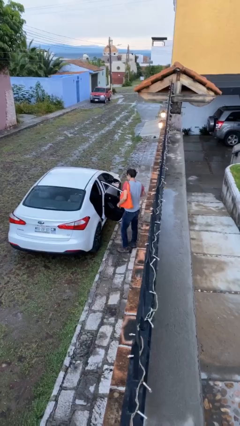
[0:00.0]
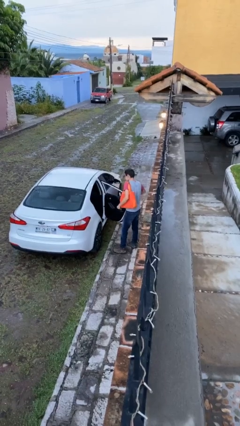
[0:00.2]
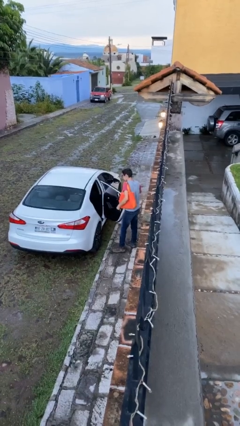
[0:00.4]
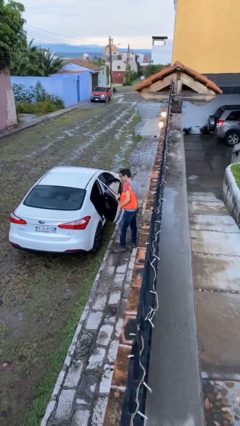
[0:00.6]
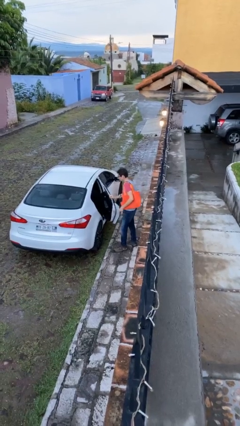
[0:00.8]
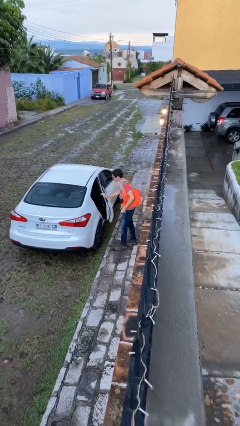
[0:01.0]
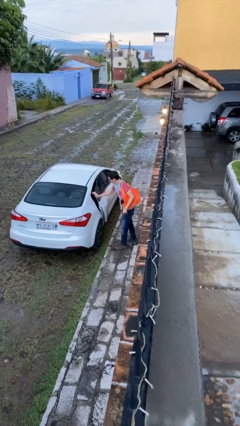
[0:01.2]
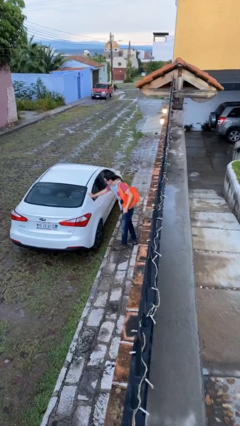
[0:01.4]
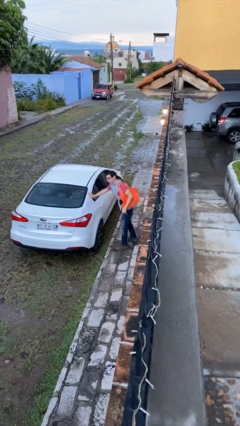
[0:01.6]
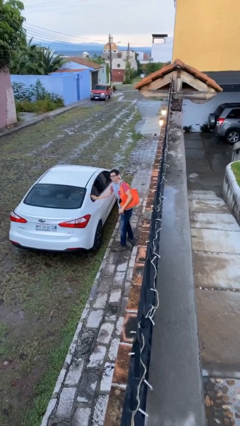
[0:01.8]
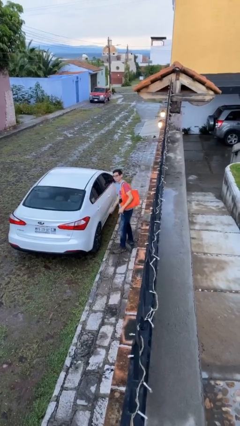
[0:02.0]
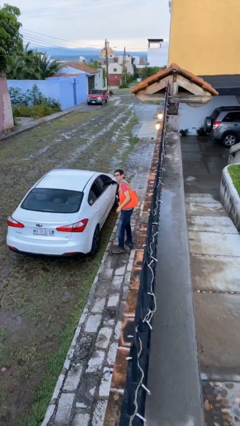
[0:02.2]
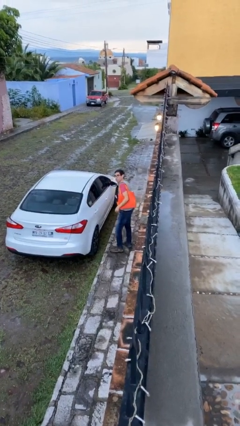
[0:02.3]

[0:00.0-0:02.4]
person closes car door

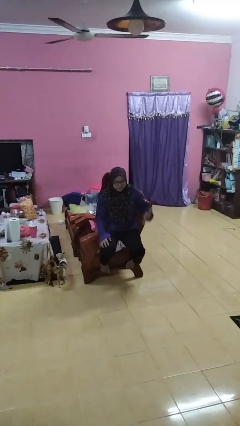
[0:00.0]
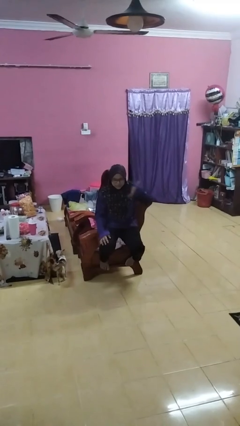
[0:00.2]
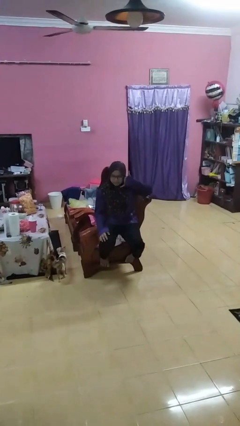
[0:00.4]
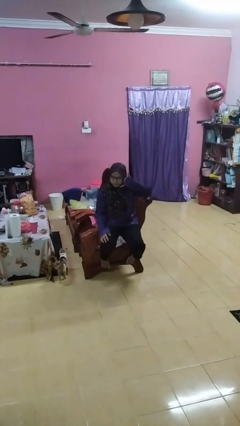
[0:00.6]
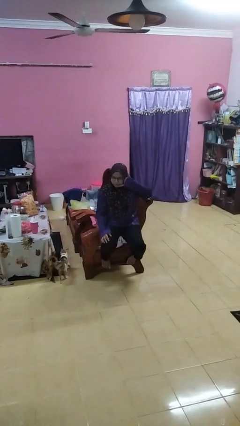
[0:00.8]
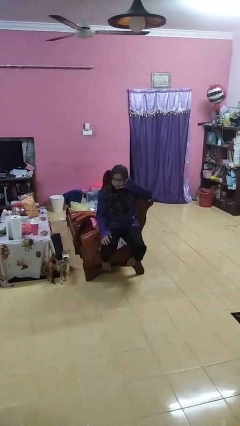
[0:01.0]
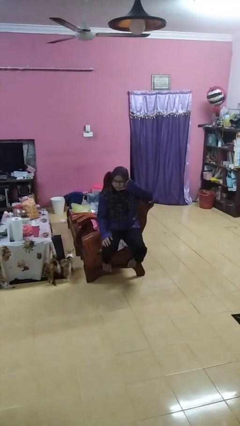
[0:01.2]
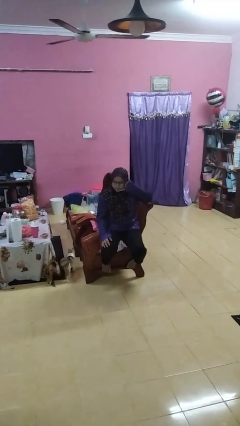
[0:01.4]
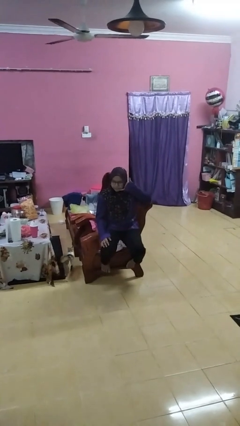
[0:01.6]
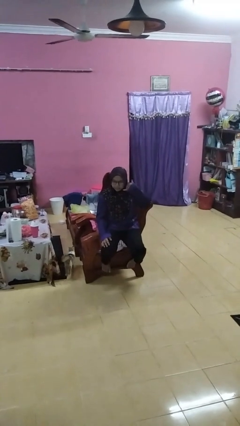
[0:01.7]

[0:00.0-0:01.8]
person gestures call me

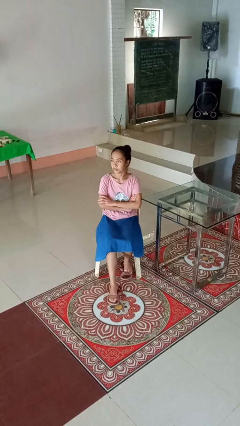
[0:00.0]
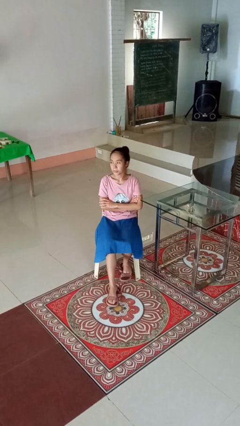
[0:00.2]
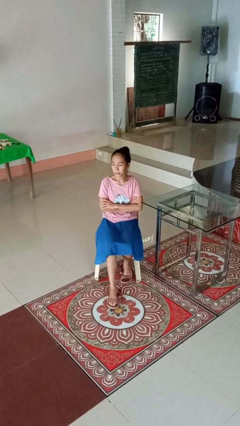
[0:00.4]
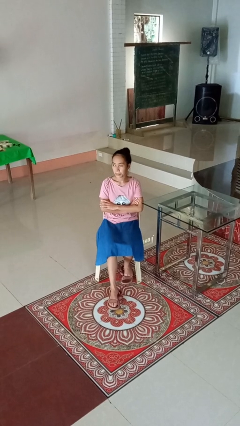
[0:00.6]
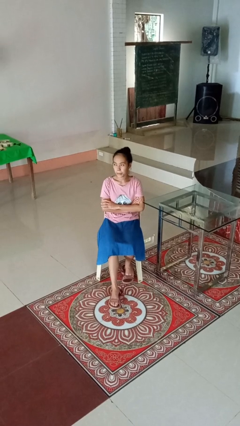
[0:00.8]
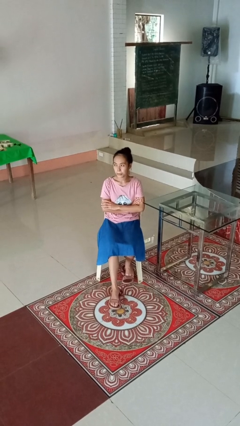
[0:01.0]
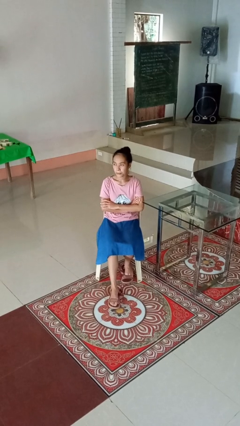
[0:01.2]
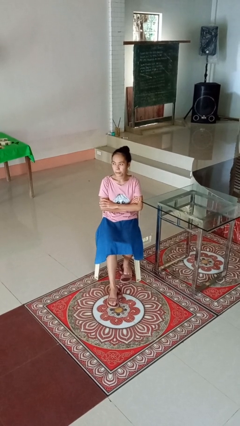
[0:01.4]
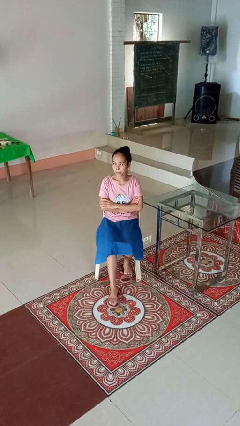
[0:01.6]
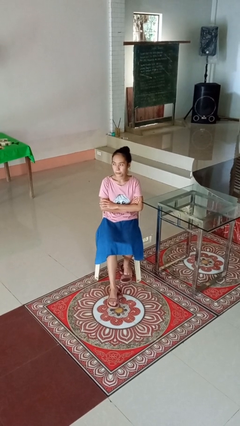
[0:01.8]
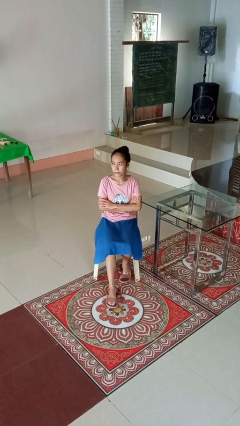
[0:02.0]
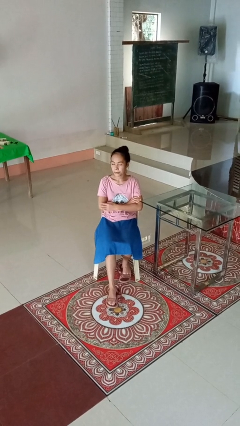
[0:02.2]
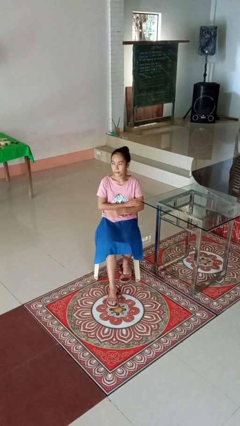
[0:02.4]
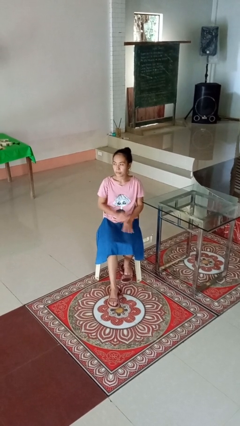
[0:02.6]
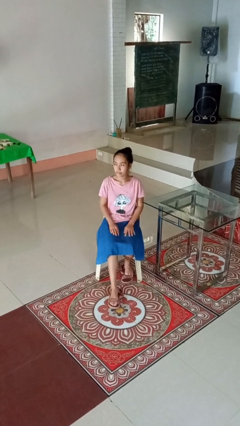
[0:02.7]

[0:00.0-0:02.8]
person crosses arms

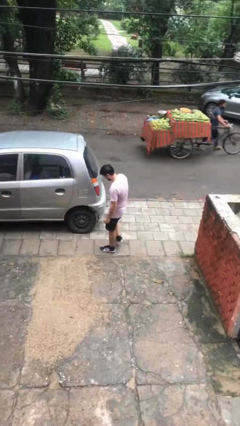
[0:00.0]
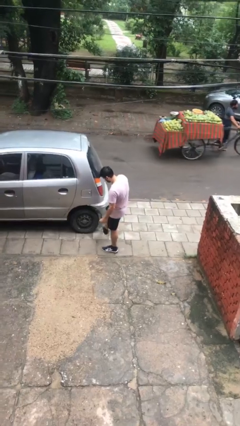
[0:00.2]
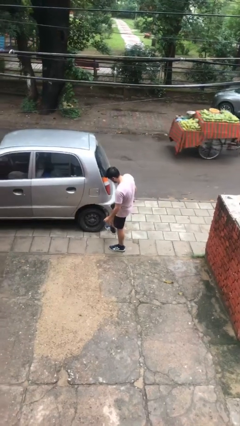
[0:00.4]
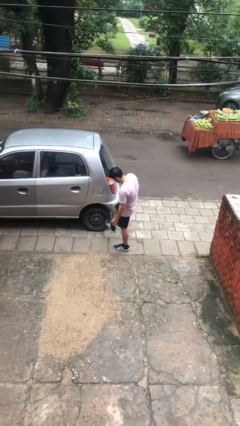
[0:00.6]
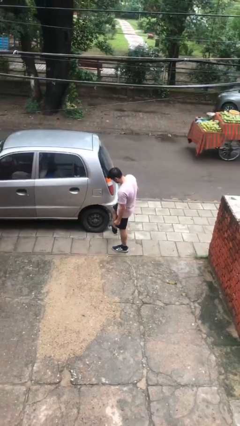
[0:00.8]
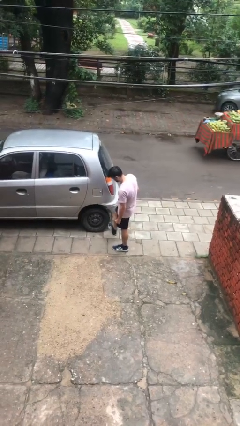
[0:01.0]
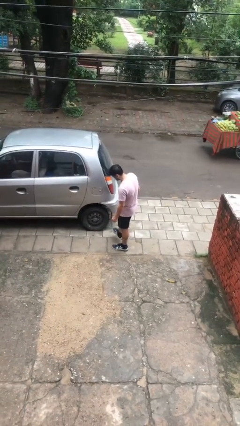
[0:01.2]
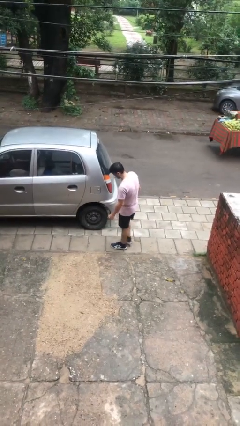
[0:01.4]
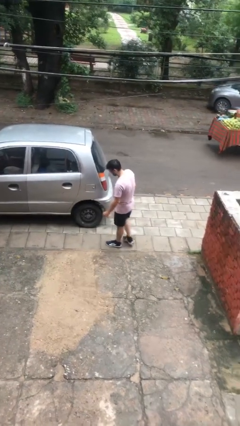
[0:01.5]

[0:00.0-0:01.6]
person kicks car tires

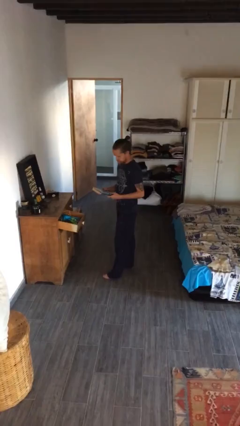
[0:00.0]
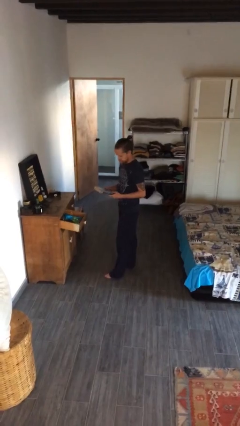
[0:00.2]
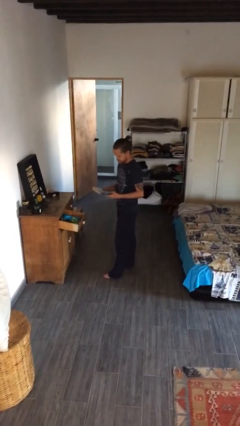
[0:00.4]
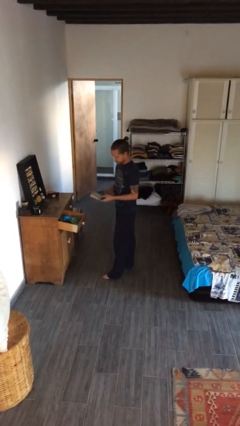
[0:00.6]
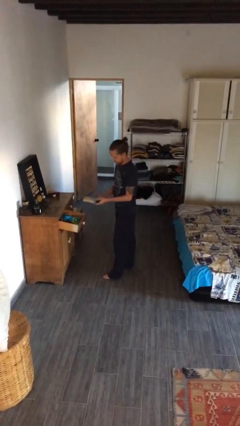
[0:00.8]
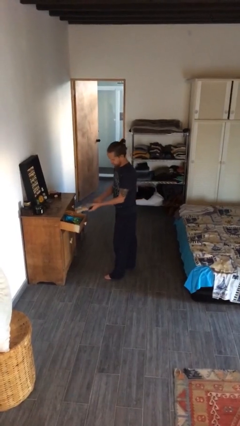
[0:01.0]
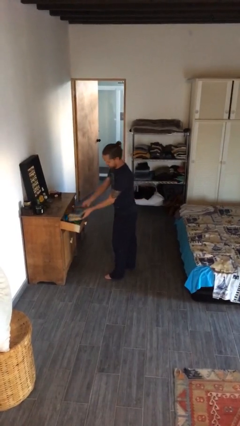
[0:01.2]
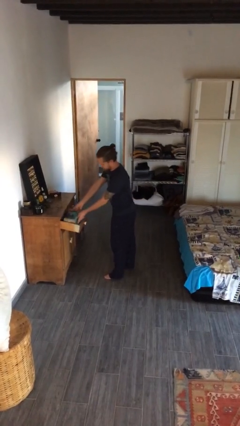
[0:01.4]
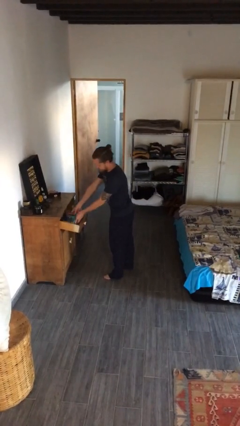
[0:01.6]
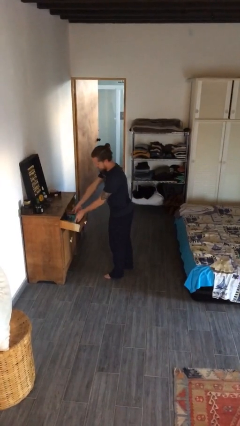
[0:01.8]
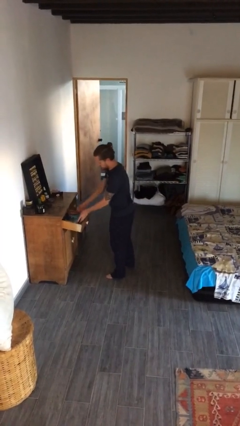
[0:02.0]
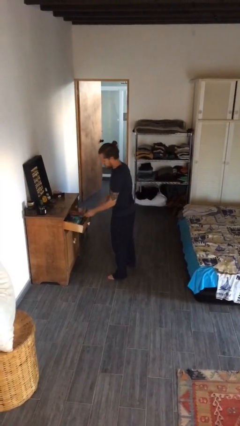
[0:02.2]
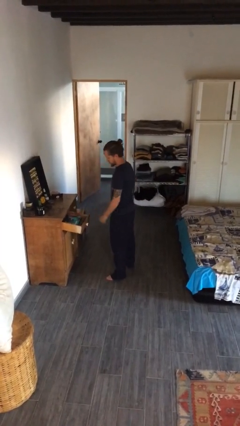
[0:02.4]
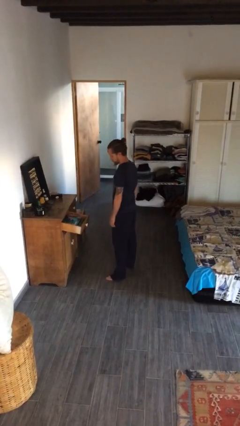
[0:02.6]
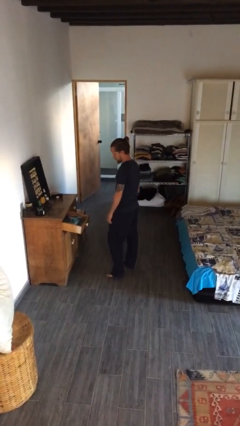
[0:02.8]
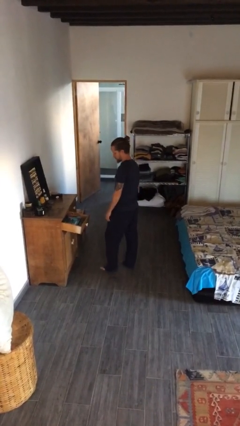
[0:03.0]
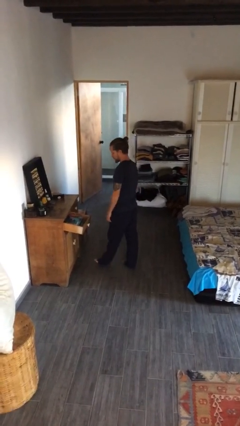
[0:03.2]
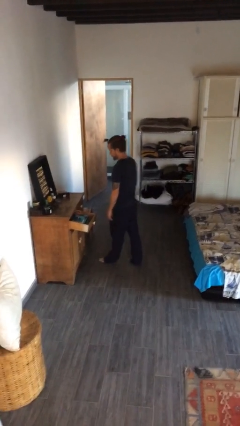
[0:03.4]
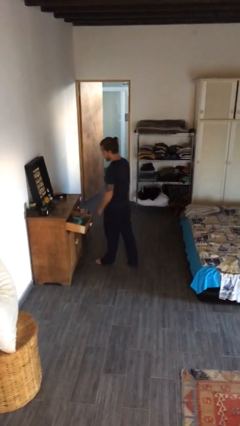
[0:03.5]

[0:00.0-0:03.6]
person puts down object into cabinet

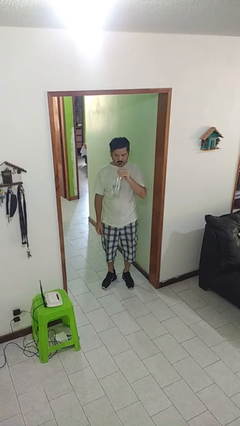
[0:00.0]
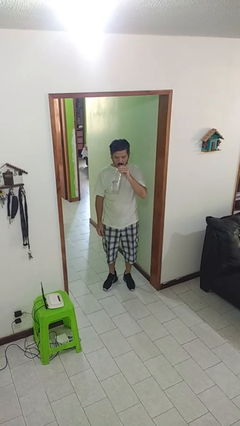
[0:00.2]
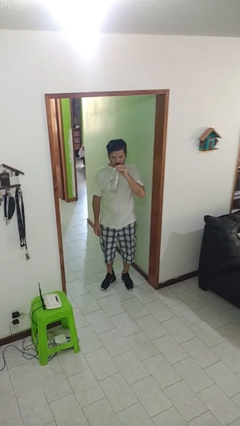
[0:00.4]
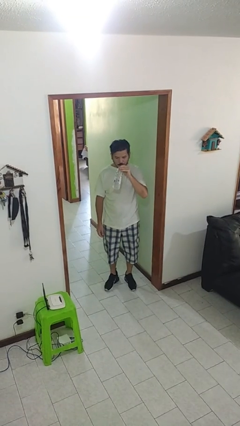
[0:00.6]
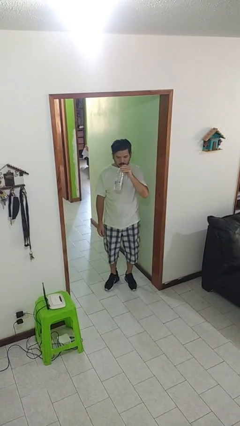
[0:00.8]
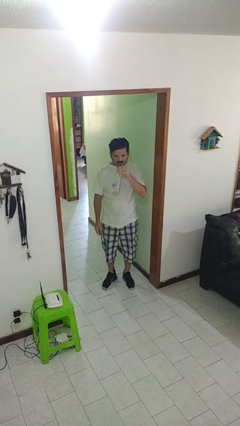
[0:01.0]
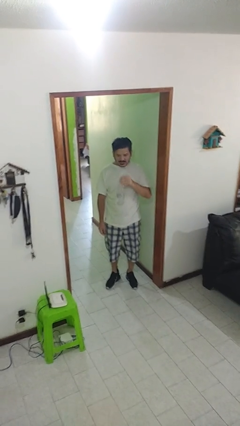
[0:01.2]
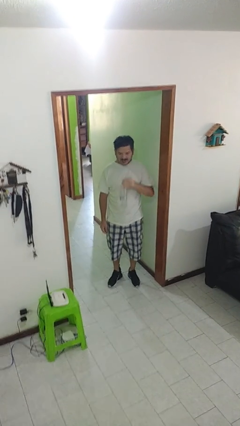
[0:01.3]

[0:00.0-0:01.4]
person drinks from straw

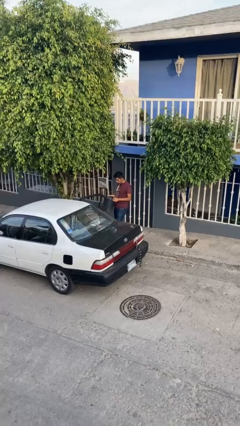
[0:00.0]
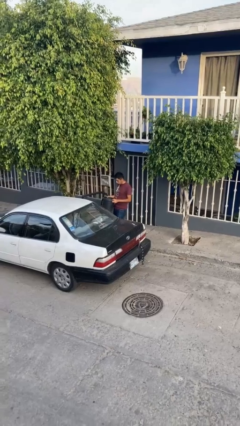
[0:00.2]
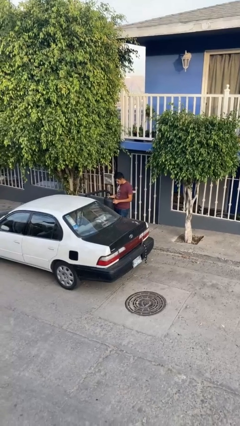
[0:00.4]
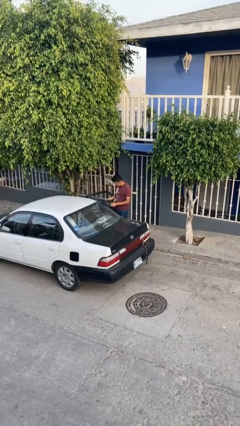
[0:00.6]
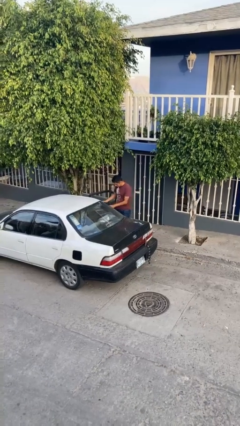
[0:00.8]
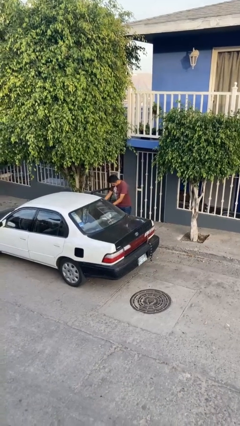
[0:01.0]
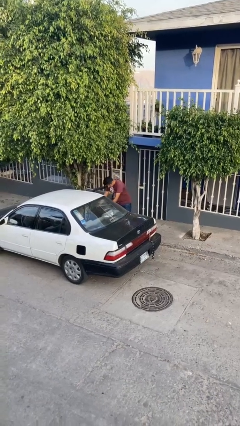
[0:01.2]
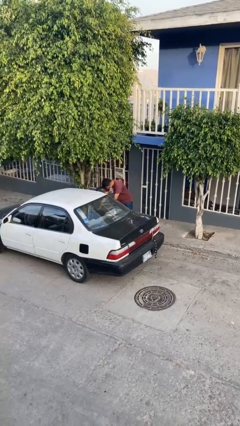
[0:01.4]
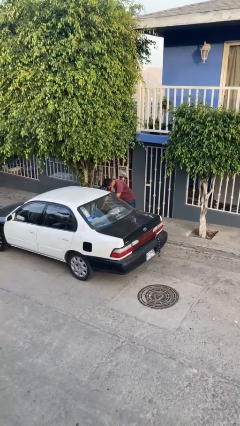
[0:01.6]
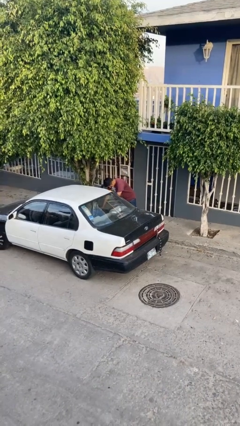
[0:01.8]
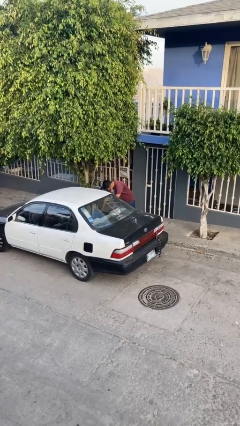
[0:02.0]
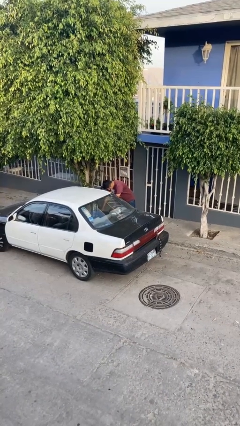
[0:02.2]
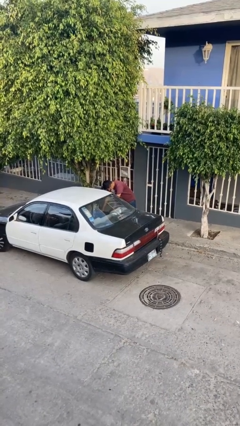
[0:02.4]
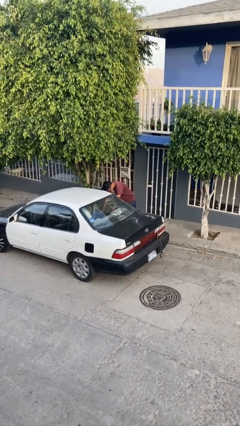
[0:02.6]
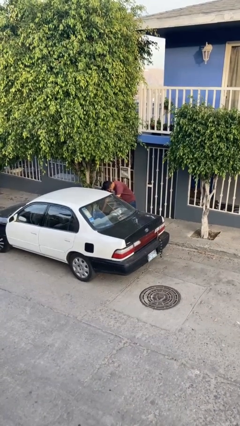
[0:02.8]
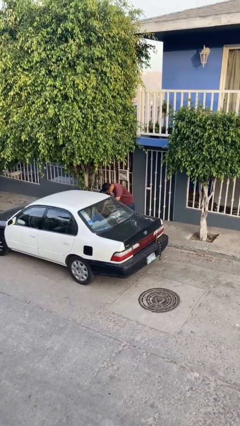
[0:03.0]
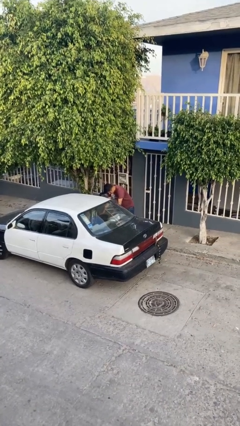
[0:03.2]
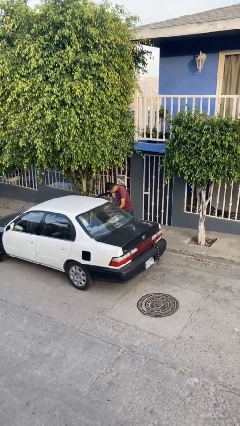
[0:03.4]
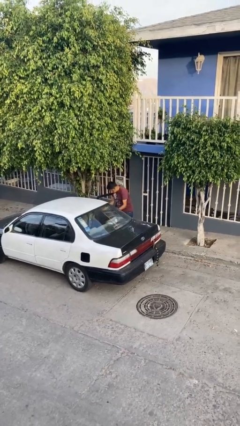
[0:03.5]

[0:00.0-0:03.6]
person loads car
